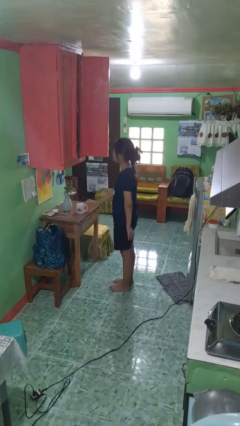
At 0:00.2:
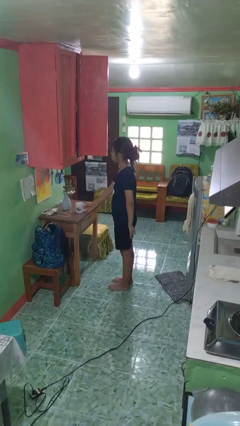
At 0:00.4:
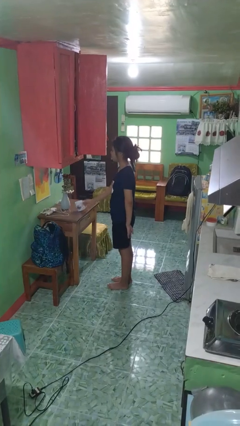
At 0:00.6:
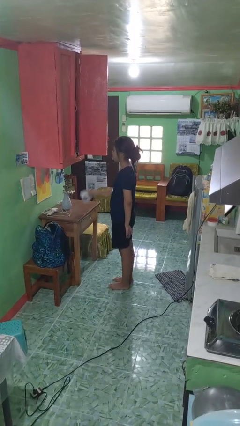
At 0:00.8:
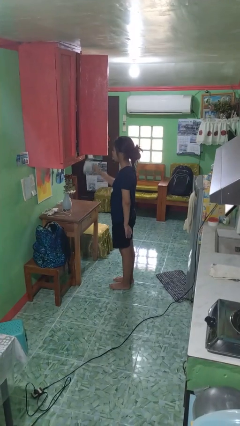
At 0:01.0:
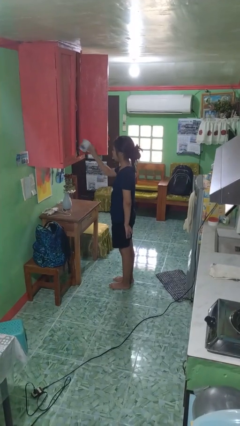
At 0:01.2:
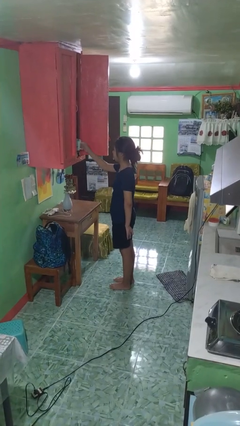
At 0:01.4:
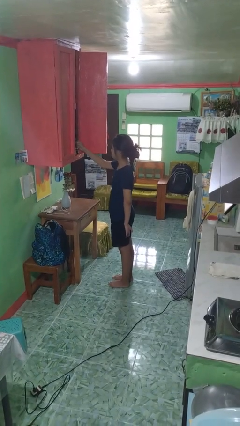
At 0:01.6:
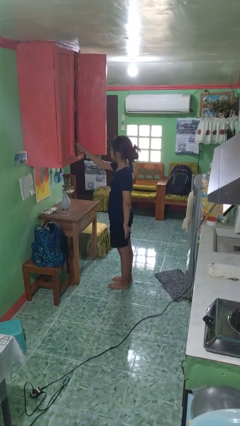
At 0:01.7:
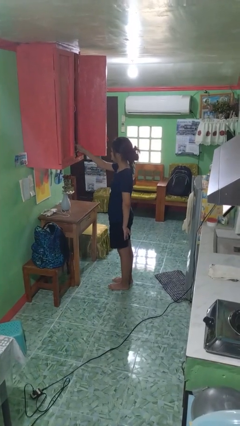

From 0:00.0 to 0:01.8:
person puts object in cabinet

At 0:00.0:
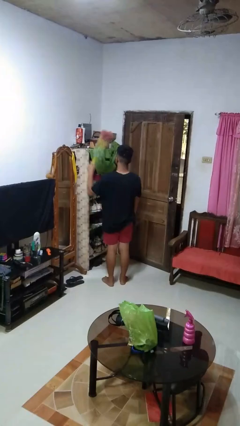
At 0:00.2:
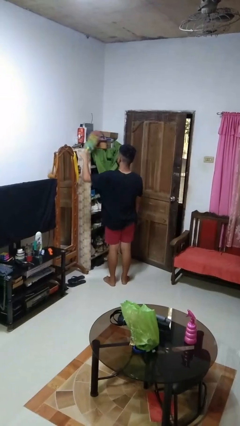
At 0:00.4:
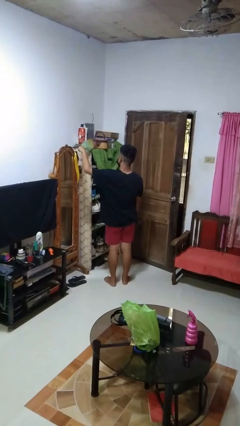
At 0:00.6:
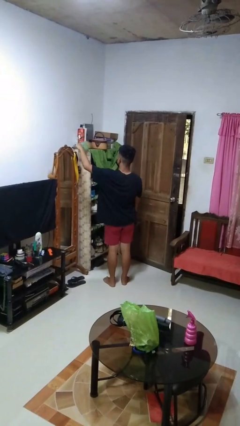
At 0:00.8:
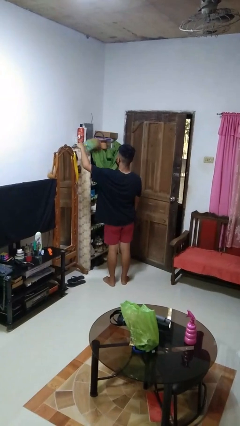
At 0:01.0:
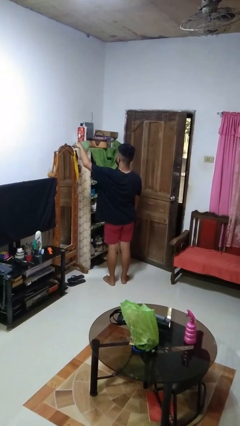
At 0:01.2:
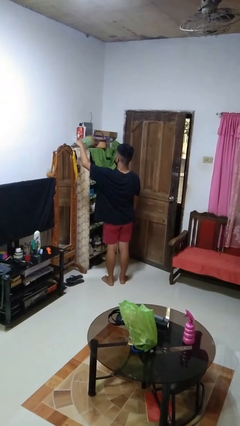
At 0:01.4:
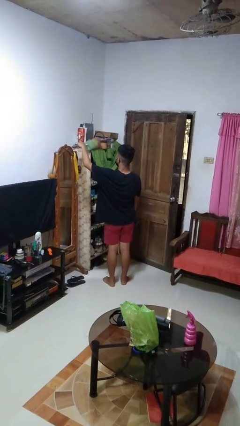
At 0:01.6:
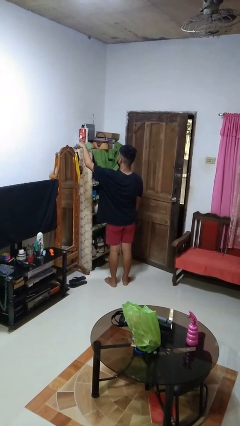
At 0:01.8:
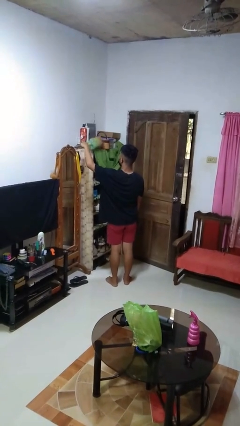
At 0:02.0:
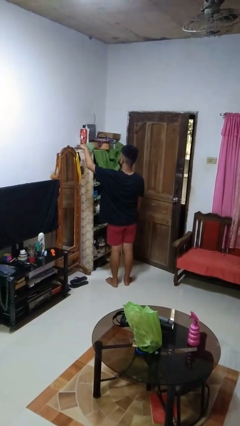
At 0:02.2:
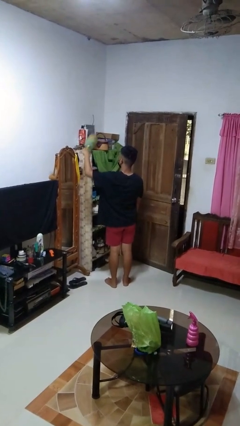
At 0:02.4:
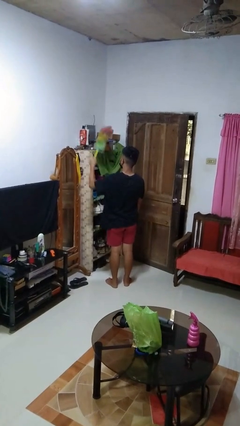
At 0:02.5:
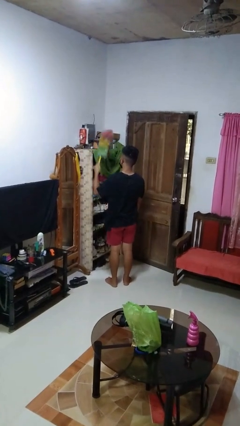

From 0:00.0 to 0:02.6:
person dusts furniture

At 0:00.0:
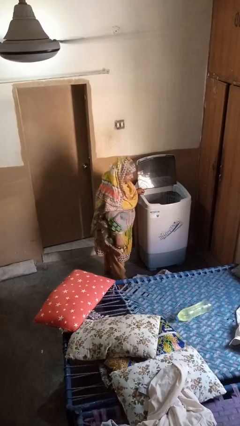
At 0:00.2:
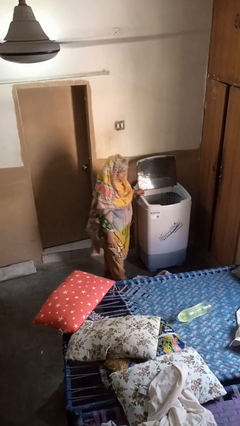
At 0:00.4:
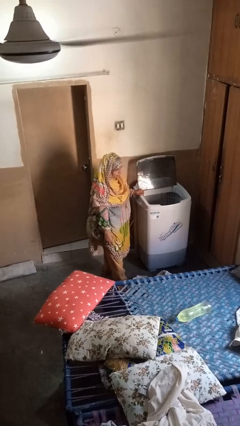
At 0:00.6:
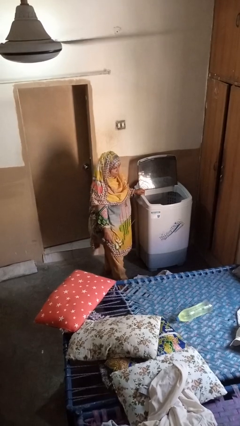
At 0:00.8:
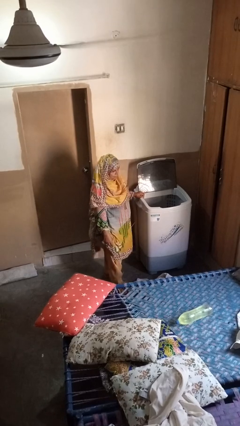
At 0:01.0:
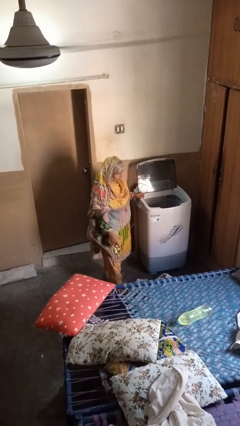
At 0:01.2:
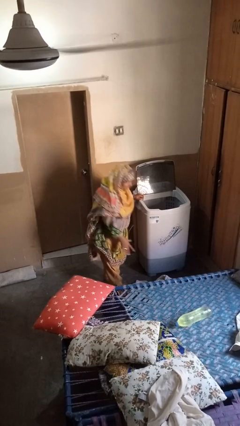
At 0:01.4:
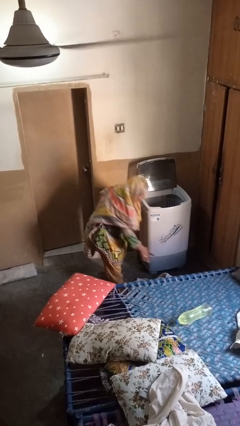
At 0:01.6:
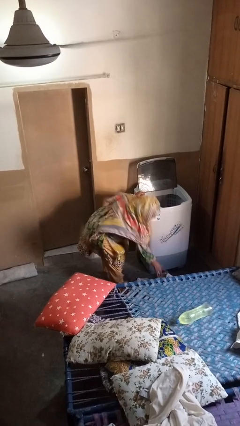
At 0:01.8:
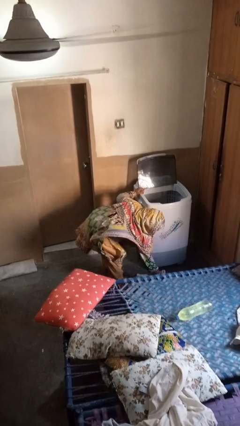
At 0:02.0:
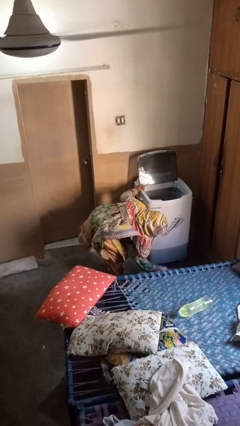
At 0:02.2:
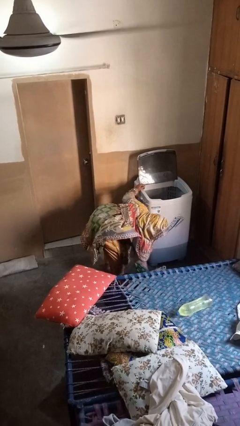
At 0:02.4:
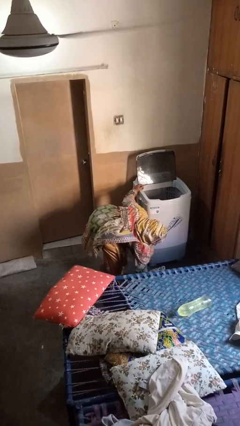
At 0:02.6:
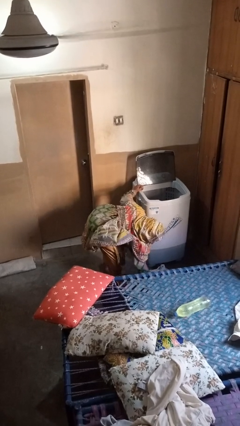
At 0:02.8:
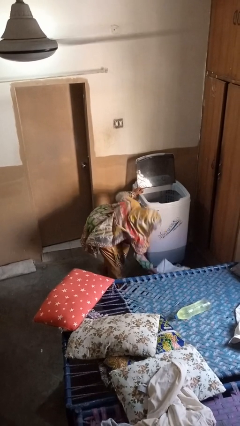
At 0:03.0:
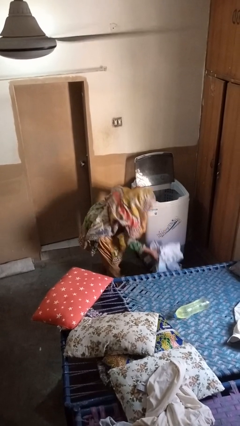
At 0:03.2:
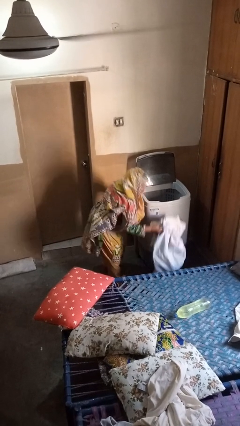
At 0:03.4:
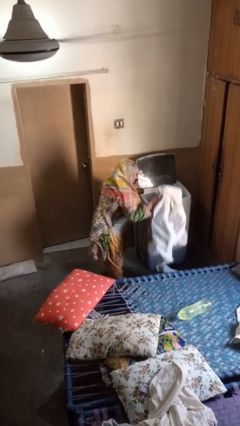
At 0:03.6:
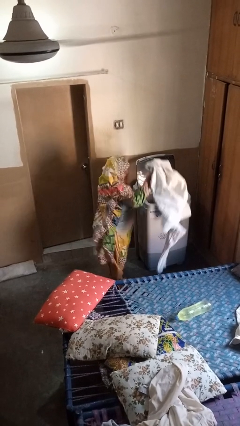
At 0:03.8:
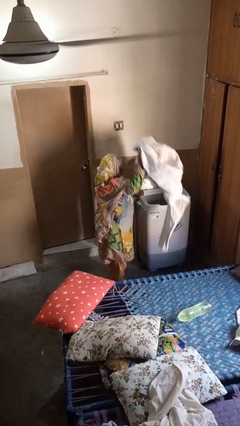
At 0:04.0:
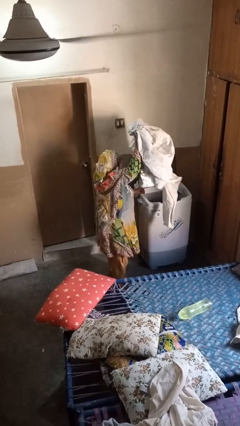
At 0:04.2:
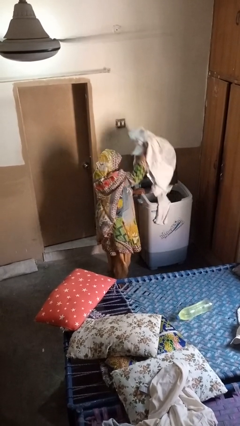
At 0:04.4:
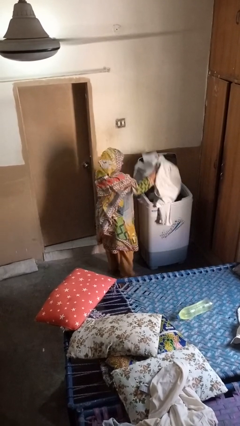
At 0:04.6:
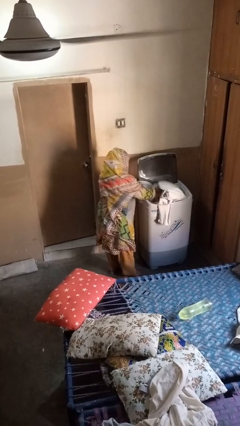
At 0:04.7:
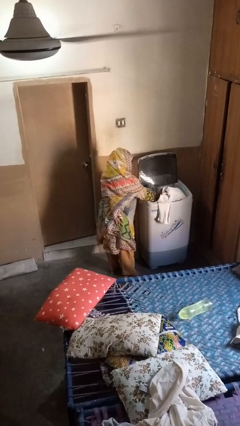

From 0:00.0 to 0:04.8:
person loads clotheswasher

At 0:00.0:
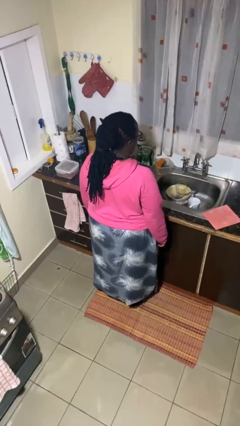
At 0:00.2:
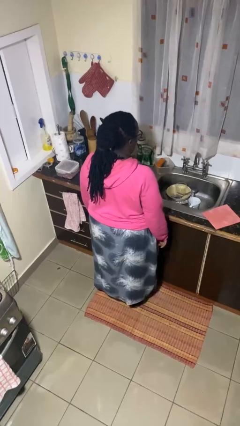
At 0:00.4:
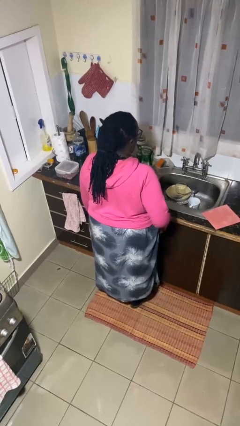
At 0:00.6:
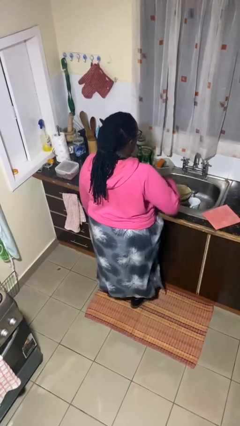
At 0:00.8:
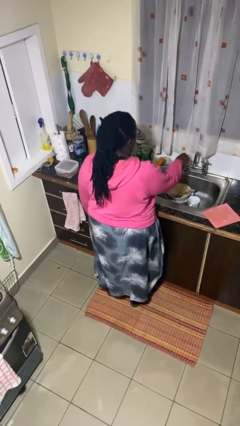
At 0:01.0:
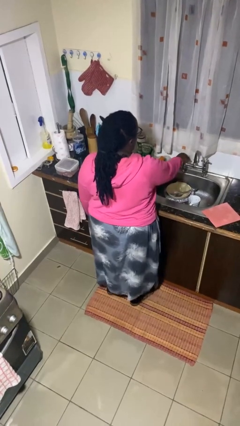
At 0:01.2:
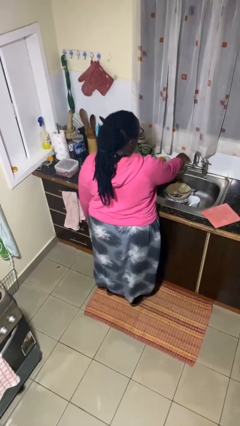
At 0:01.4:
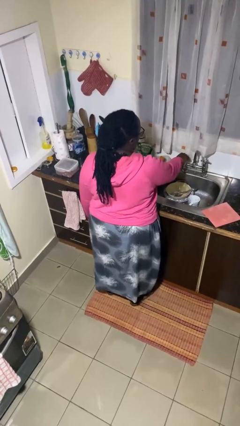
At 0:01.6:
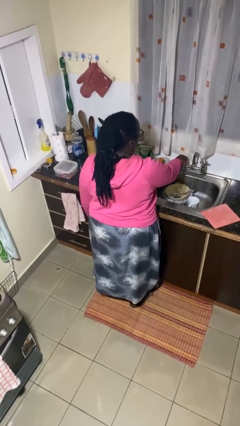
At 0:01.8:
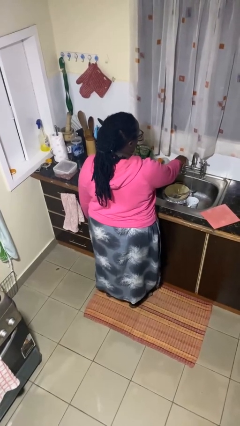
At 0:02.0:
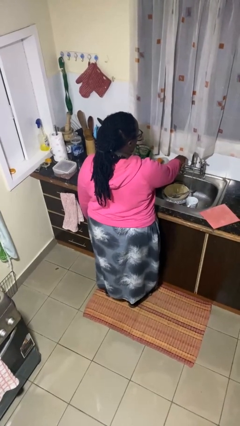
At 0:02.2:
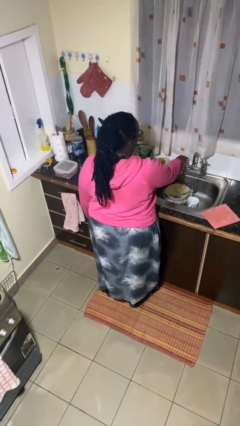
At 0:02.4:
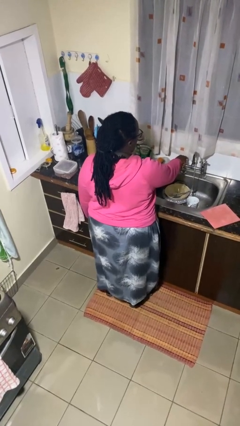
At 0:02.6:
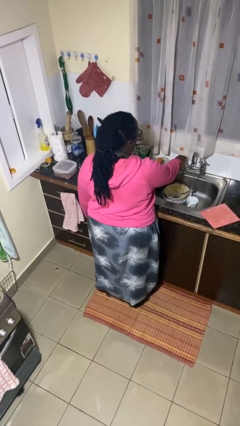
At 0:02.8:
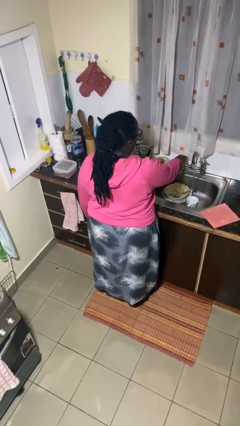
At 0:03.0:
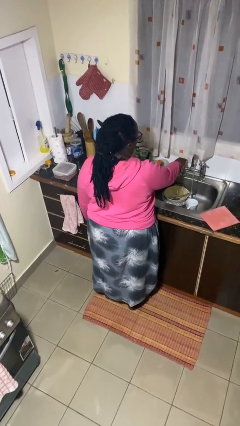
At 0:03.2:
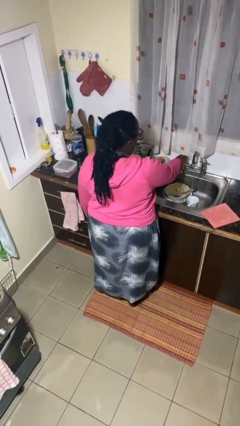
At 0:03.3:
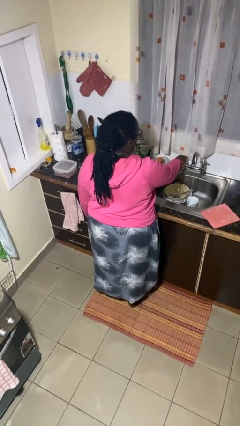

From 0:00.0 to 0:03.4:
person turns on faucet

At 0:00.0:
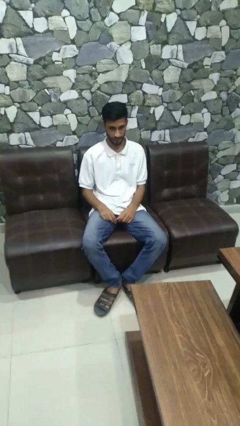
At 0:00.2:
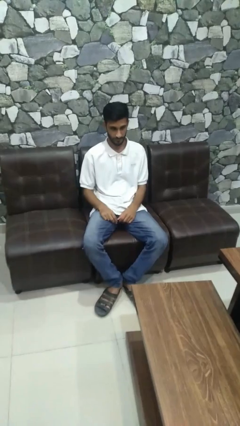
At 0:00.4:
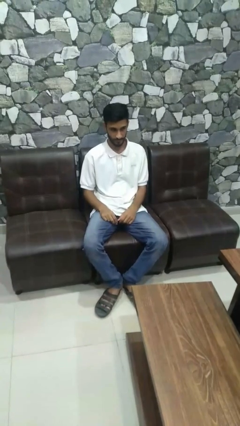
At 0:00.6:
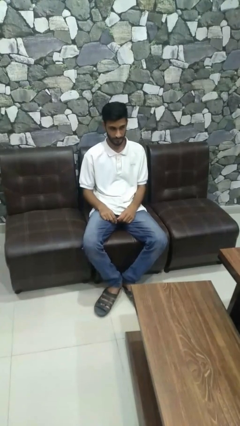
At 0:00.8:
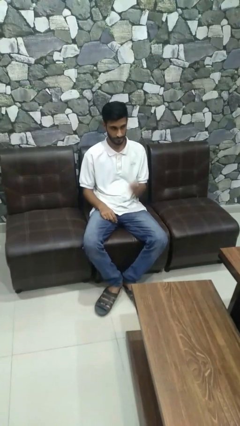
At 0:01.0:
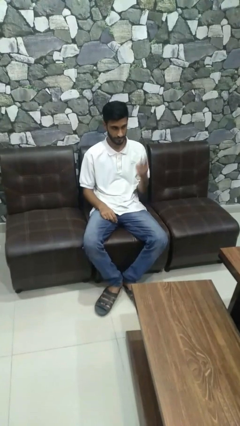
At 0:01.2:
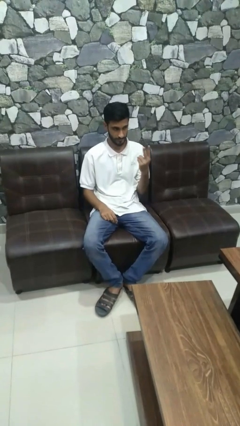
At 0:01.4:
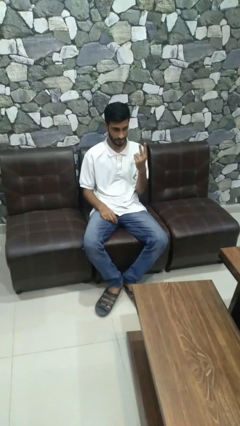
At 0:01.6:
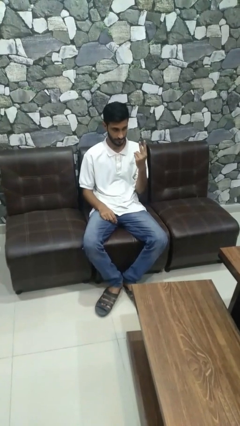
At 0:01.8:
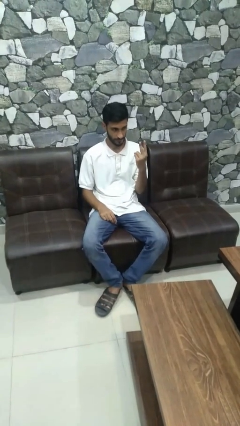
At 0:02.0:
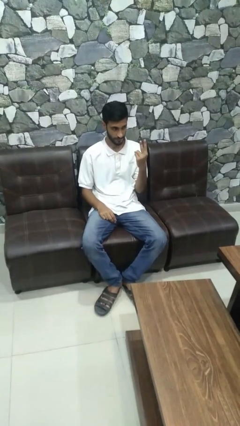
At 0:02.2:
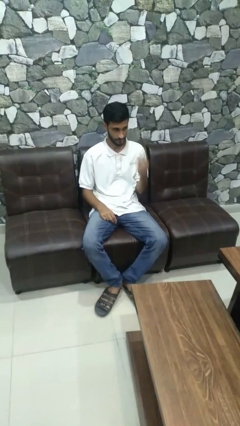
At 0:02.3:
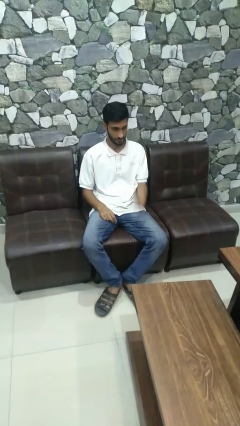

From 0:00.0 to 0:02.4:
person gestures peace

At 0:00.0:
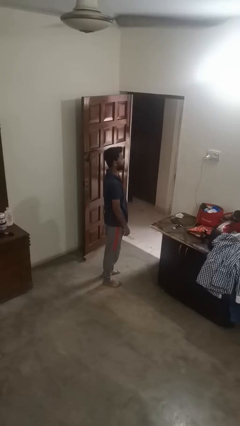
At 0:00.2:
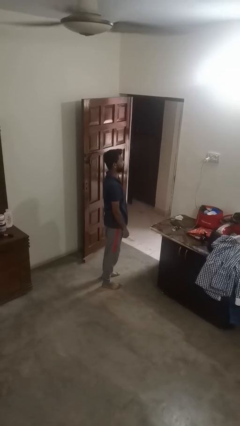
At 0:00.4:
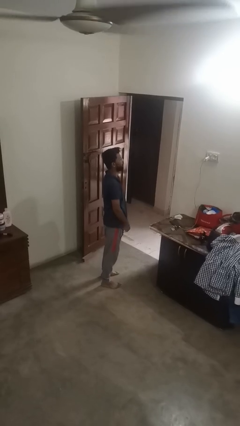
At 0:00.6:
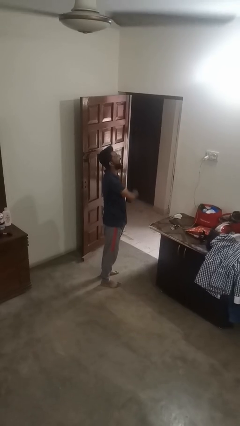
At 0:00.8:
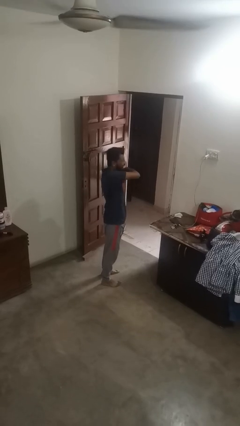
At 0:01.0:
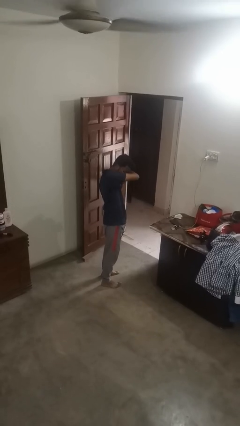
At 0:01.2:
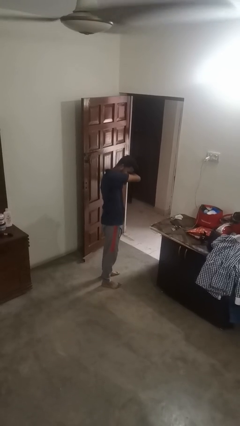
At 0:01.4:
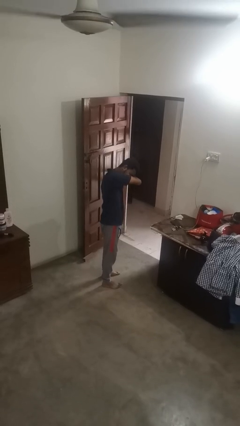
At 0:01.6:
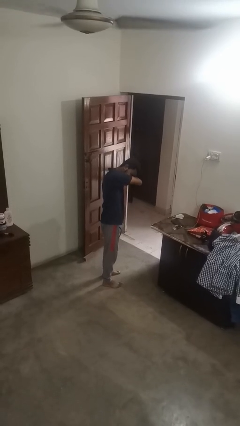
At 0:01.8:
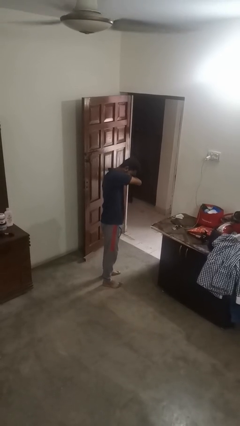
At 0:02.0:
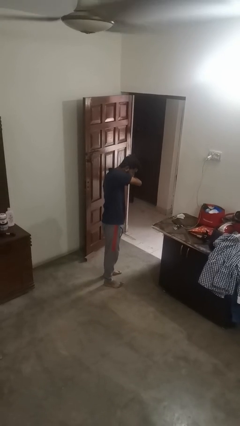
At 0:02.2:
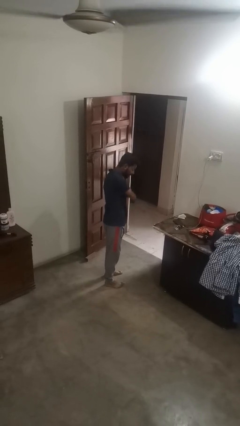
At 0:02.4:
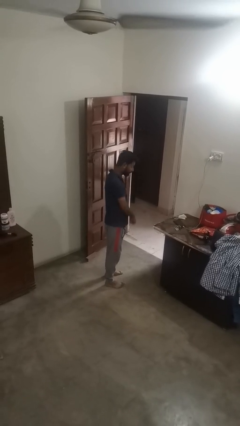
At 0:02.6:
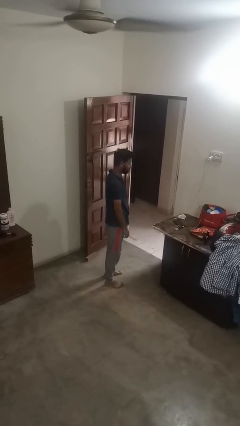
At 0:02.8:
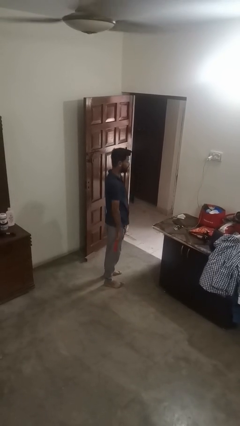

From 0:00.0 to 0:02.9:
person sneezes into arm
